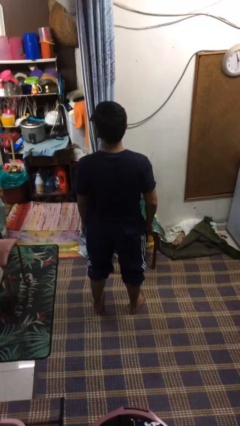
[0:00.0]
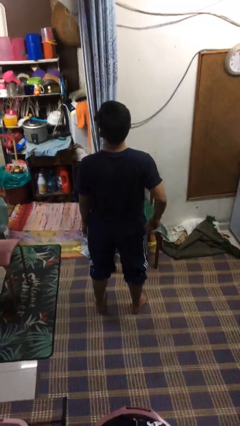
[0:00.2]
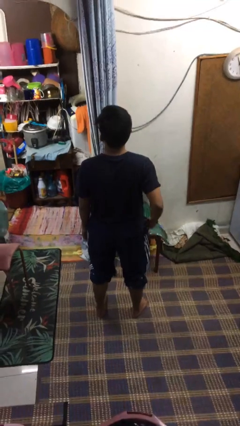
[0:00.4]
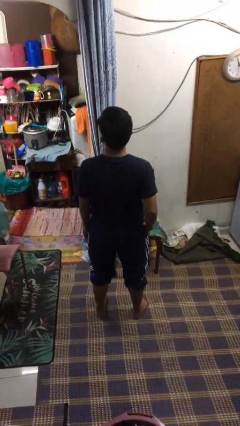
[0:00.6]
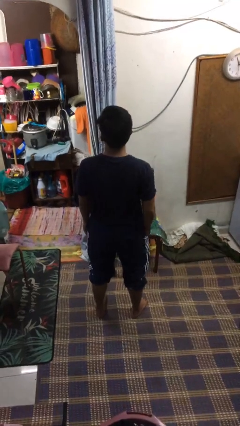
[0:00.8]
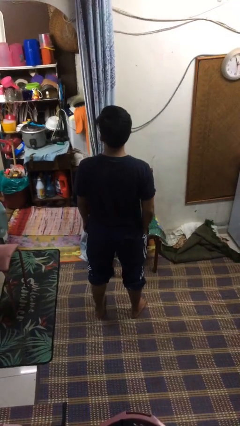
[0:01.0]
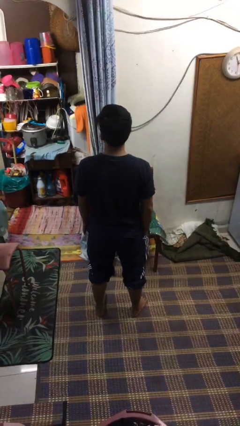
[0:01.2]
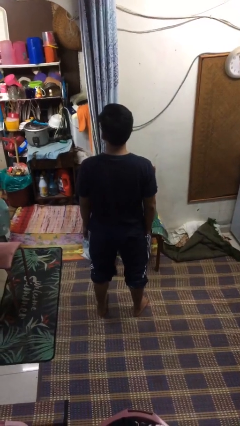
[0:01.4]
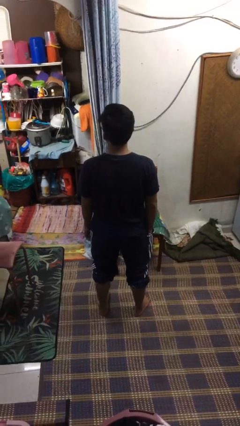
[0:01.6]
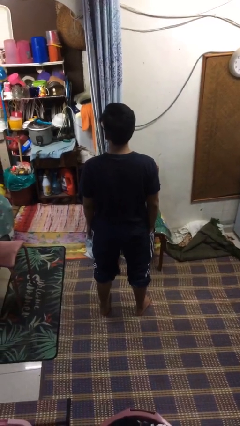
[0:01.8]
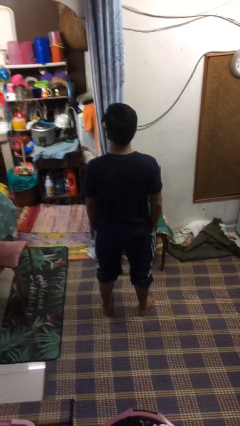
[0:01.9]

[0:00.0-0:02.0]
person puts hands in back pockets

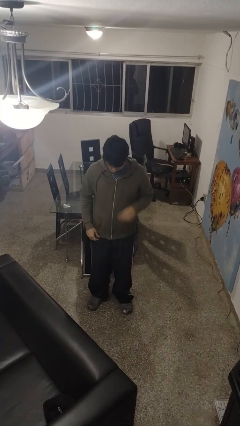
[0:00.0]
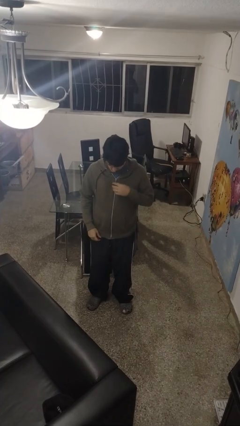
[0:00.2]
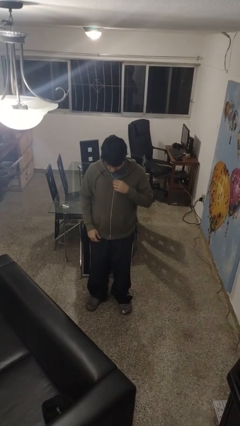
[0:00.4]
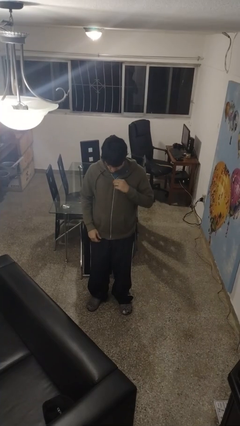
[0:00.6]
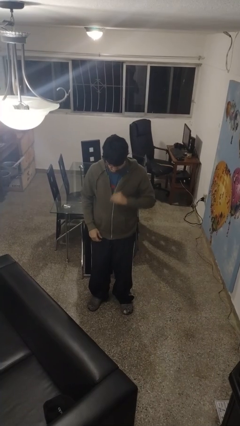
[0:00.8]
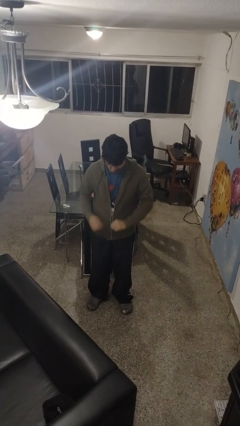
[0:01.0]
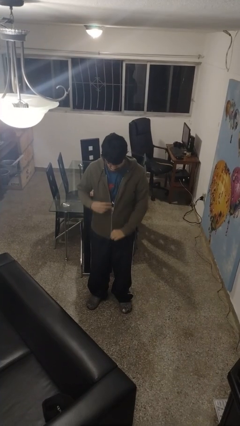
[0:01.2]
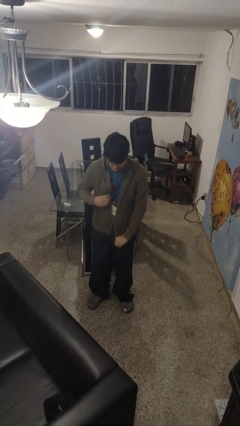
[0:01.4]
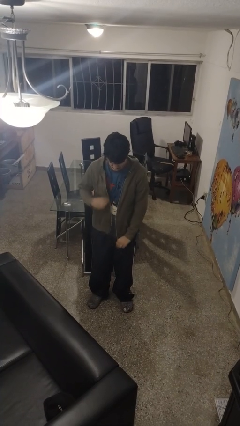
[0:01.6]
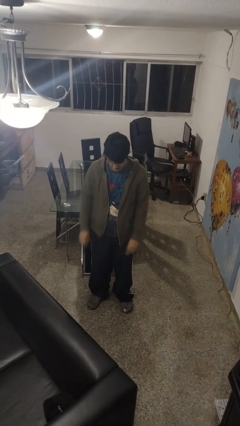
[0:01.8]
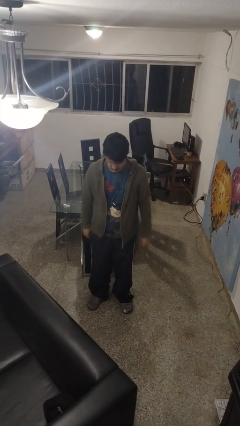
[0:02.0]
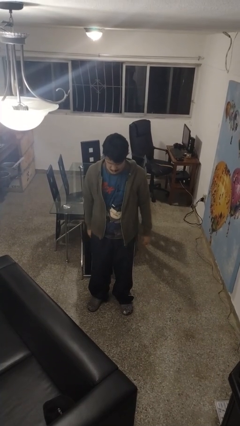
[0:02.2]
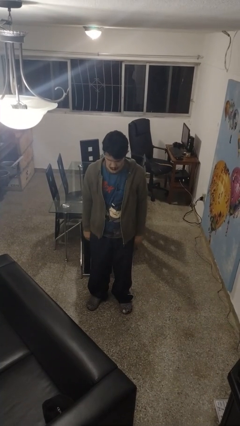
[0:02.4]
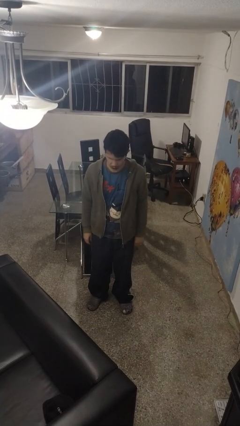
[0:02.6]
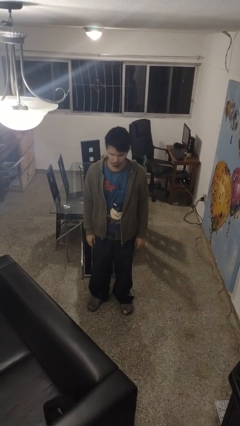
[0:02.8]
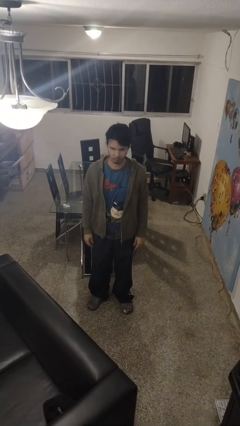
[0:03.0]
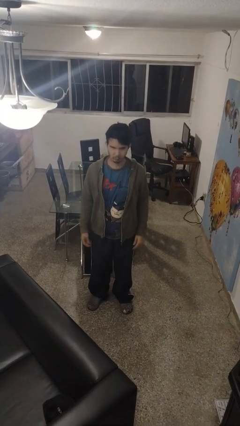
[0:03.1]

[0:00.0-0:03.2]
person unzips jacket

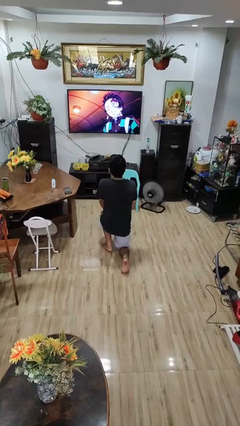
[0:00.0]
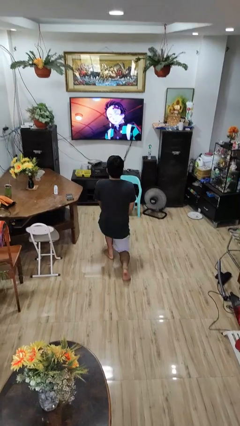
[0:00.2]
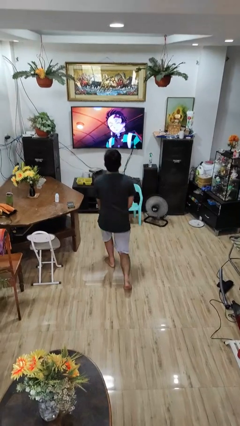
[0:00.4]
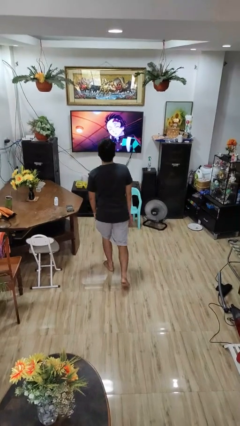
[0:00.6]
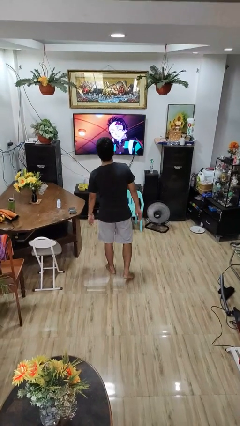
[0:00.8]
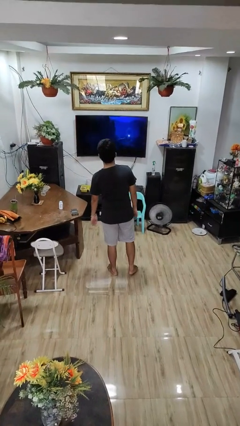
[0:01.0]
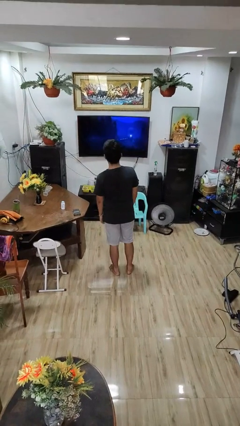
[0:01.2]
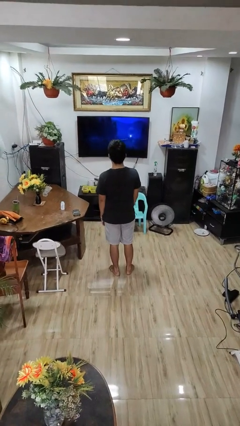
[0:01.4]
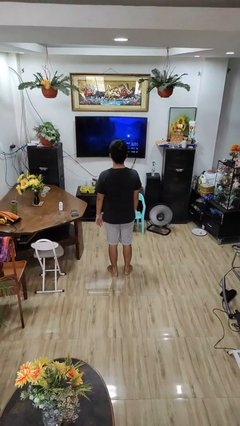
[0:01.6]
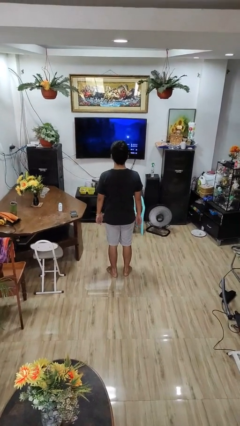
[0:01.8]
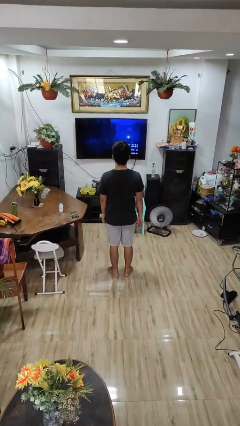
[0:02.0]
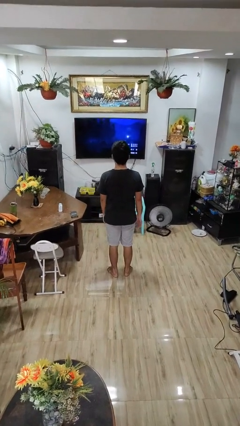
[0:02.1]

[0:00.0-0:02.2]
person stands up from floor

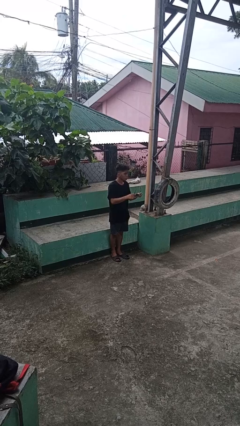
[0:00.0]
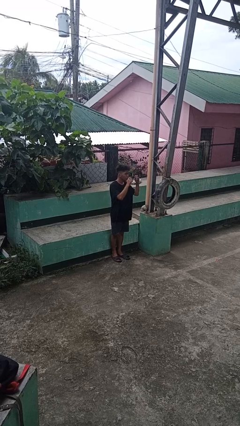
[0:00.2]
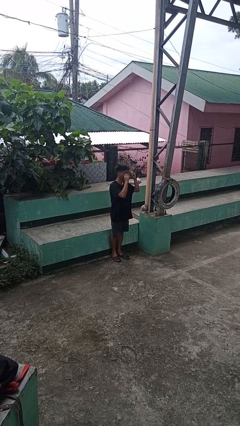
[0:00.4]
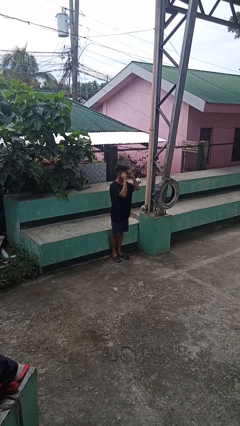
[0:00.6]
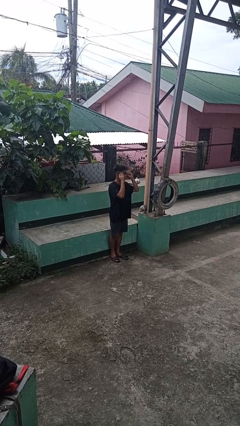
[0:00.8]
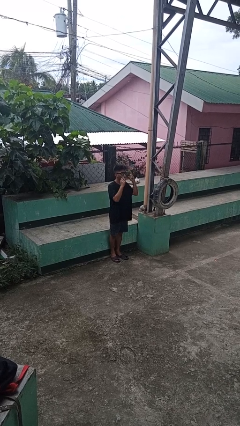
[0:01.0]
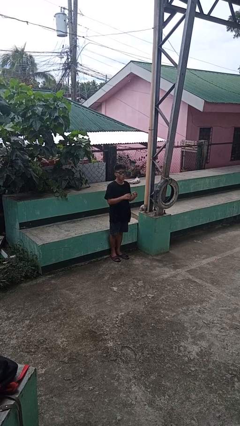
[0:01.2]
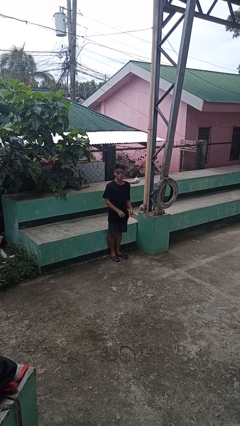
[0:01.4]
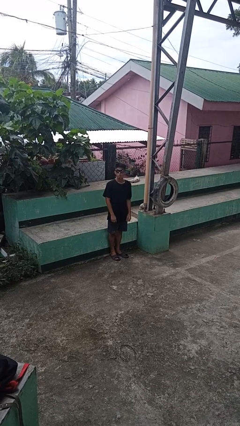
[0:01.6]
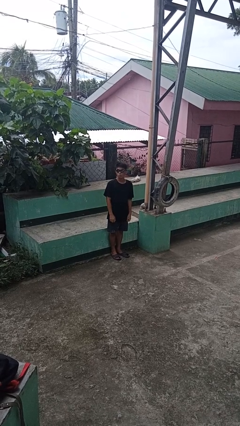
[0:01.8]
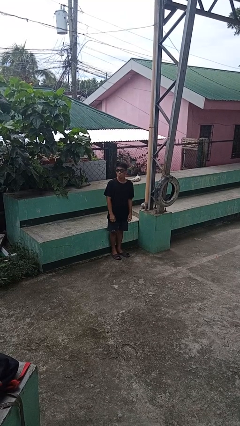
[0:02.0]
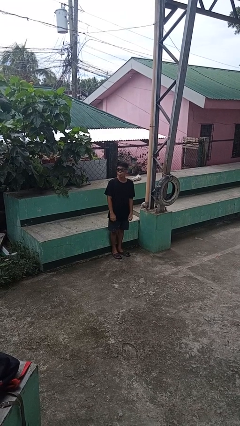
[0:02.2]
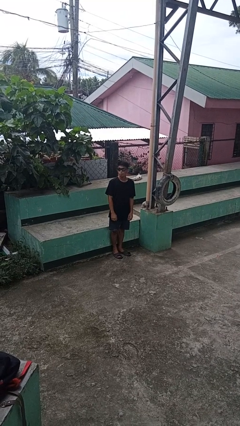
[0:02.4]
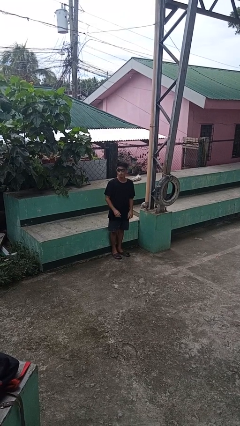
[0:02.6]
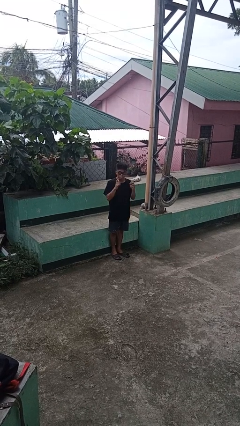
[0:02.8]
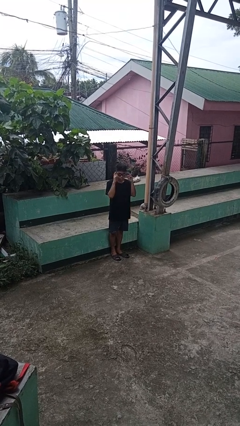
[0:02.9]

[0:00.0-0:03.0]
person puts on sunglasses

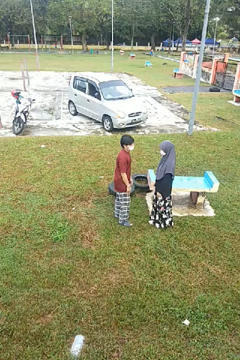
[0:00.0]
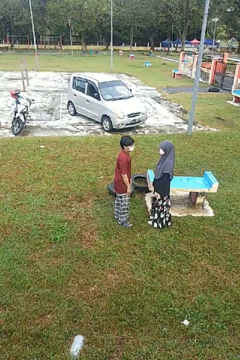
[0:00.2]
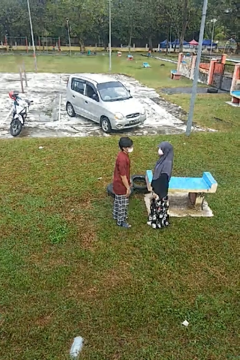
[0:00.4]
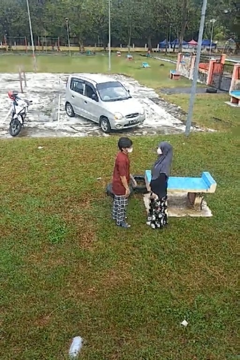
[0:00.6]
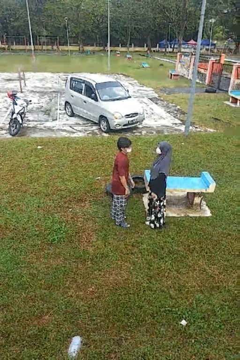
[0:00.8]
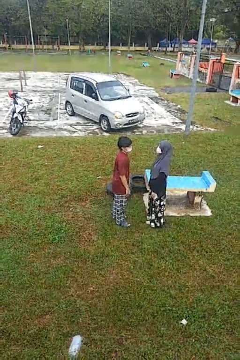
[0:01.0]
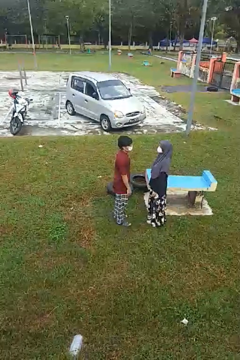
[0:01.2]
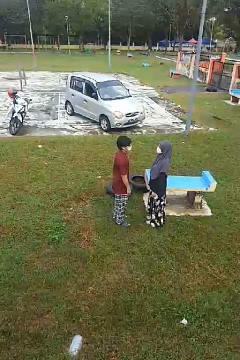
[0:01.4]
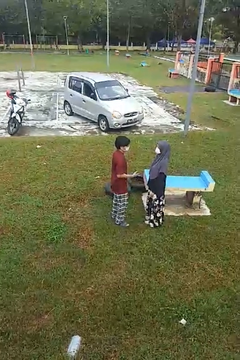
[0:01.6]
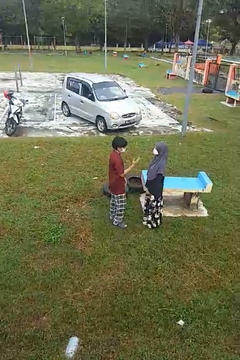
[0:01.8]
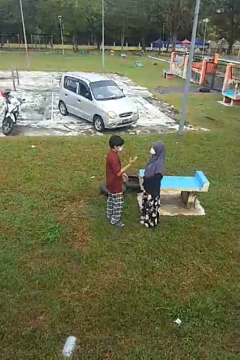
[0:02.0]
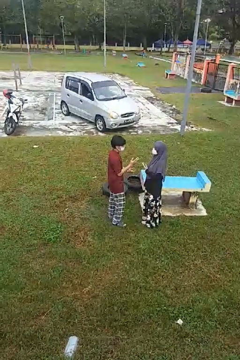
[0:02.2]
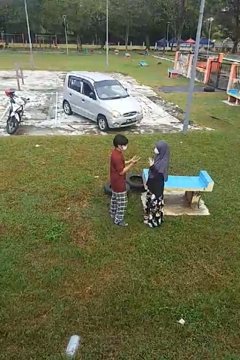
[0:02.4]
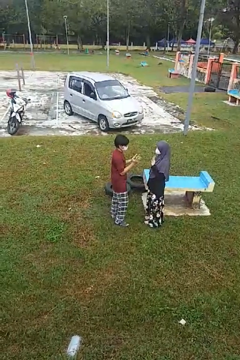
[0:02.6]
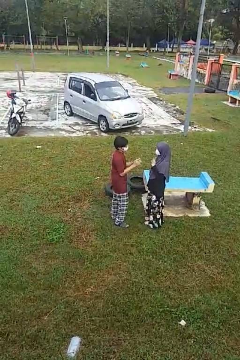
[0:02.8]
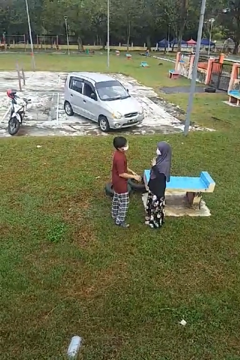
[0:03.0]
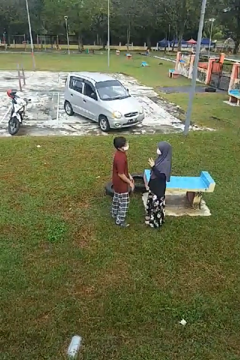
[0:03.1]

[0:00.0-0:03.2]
person talks to person

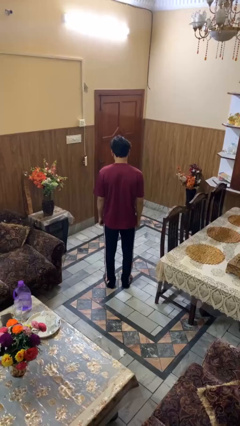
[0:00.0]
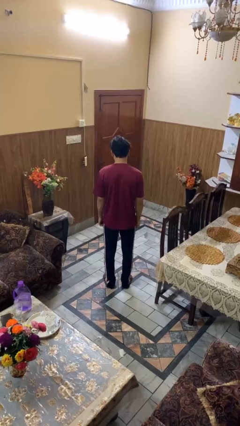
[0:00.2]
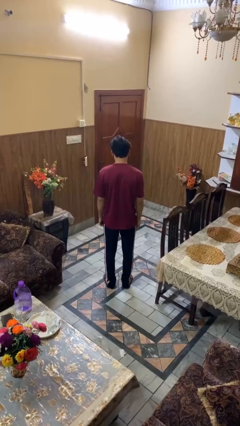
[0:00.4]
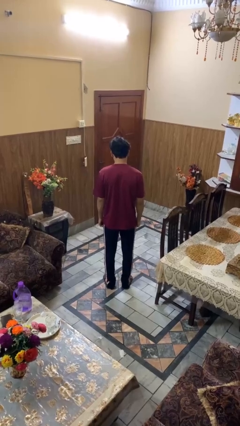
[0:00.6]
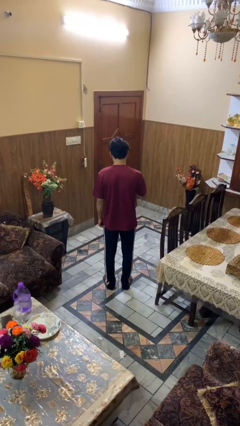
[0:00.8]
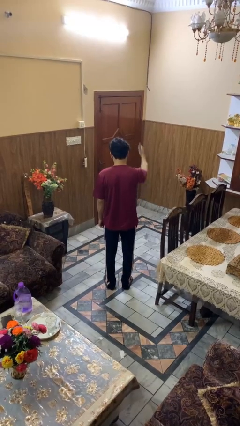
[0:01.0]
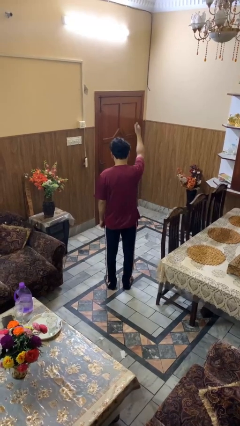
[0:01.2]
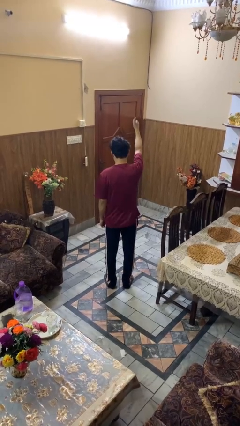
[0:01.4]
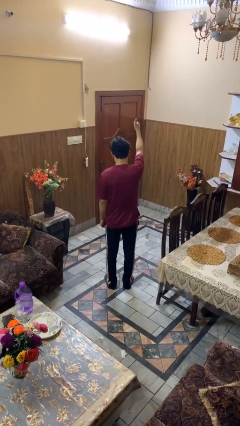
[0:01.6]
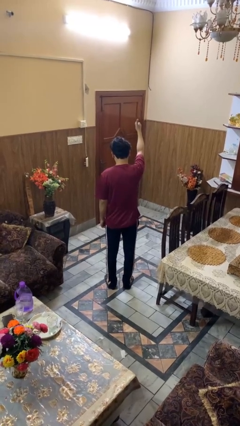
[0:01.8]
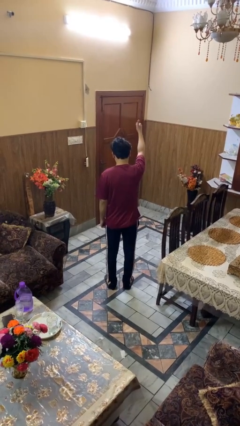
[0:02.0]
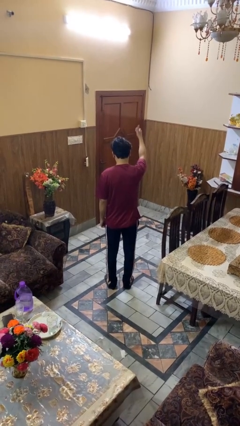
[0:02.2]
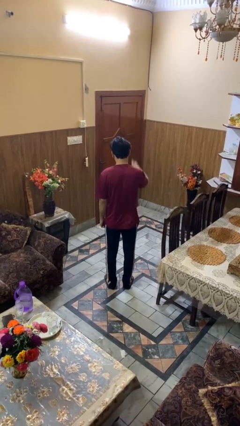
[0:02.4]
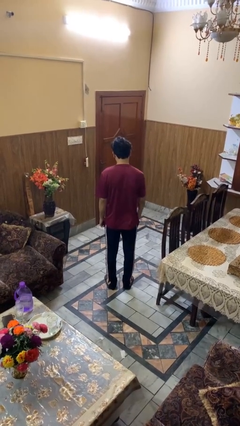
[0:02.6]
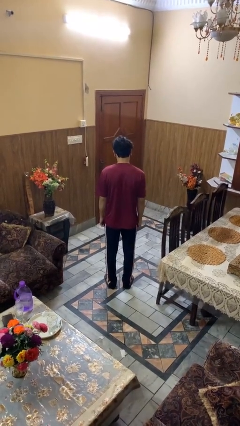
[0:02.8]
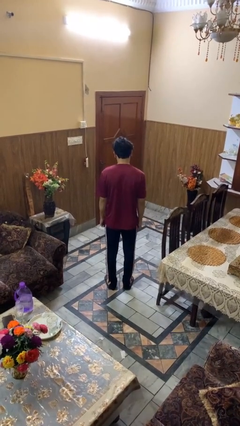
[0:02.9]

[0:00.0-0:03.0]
person gestures thumbs up

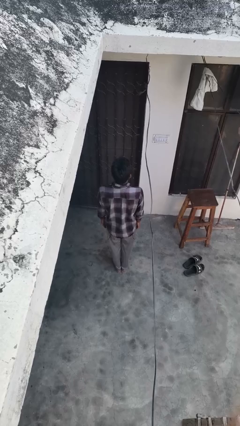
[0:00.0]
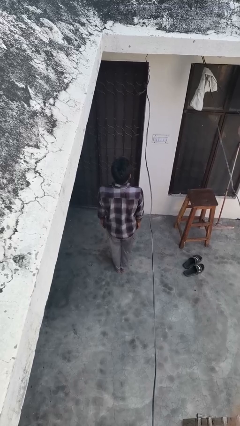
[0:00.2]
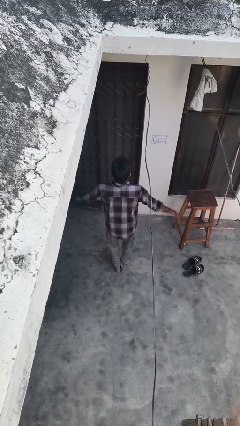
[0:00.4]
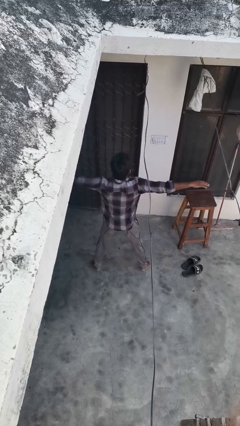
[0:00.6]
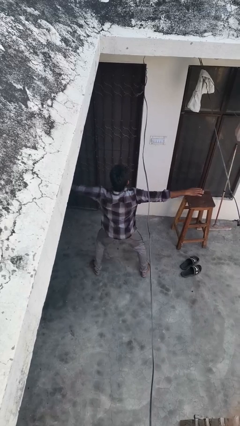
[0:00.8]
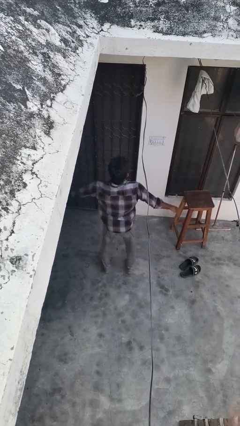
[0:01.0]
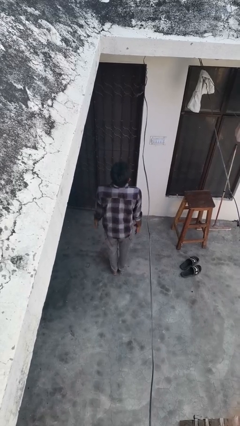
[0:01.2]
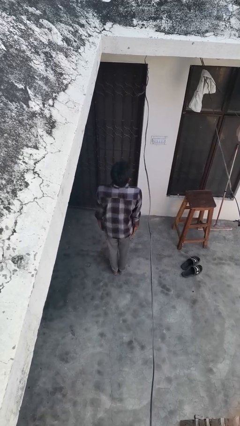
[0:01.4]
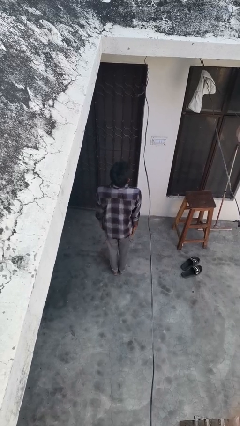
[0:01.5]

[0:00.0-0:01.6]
person exercises with jumping jacks
